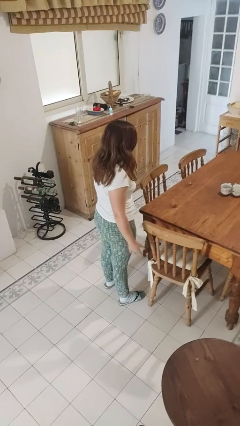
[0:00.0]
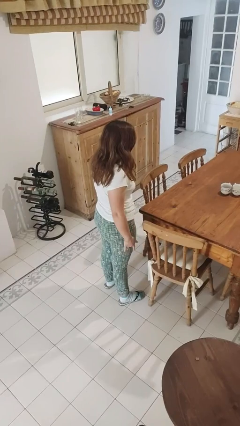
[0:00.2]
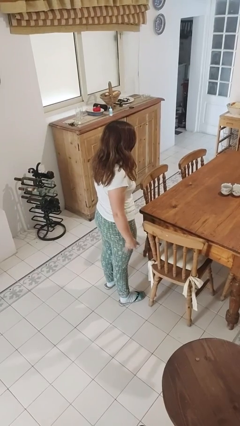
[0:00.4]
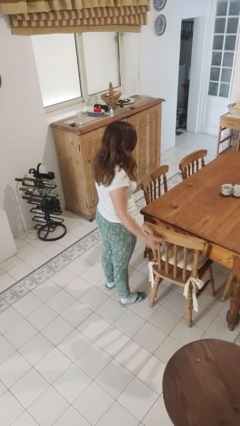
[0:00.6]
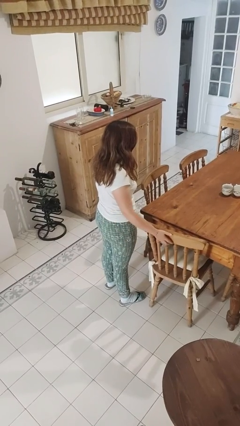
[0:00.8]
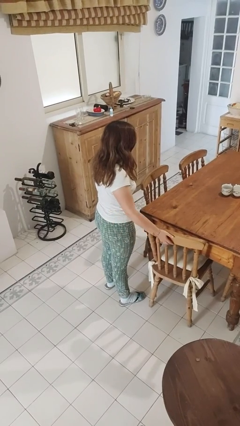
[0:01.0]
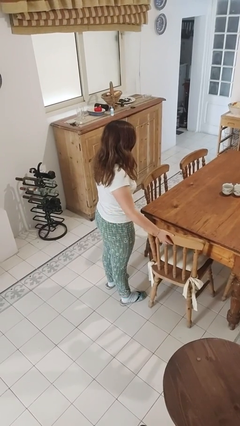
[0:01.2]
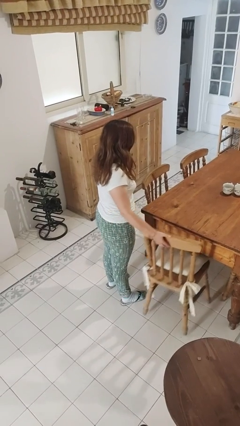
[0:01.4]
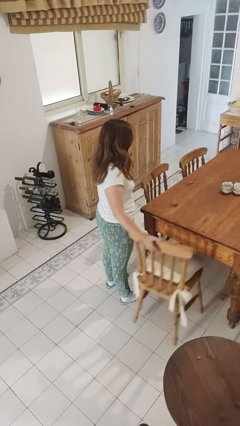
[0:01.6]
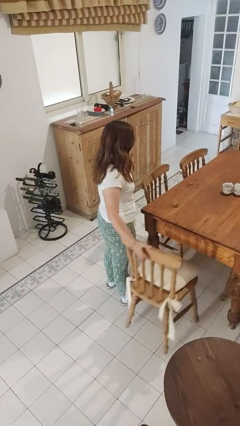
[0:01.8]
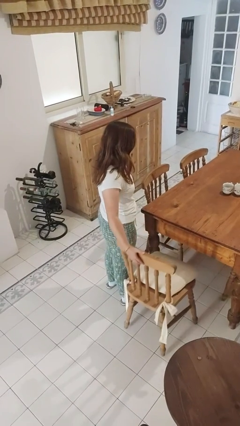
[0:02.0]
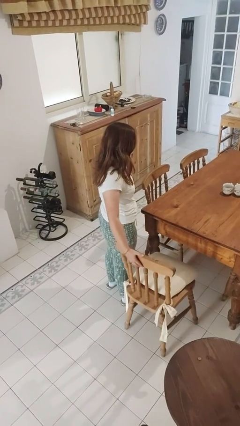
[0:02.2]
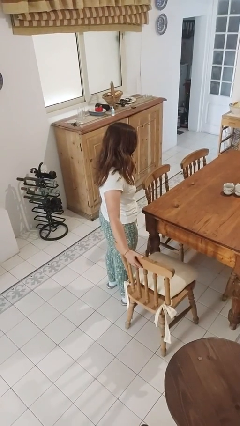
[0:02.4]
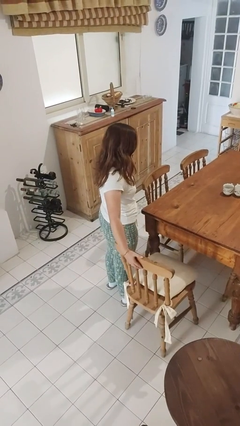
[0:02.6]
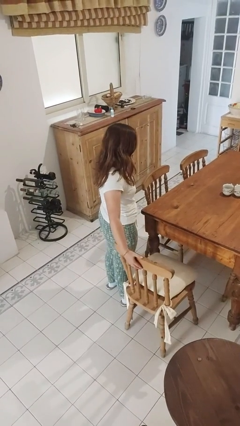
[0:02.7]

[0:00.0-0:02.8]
person pulls out chair

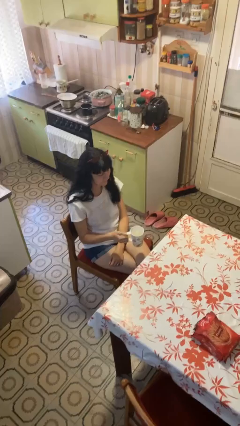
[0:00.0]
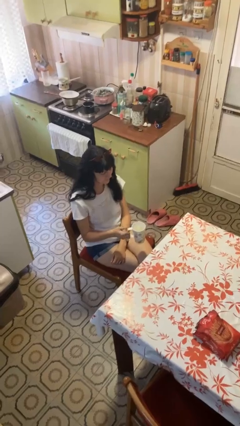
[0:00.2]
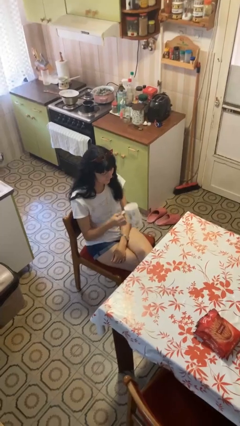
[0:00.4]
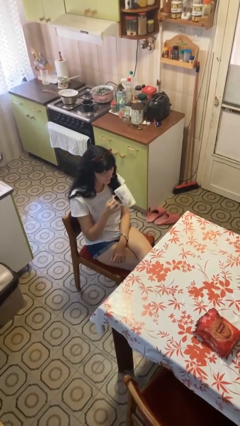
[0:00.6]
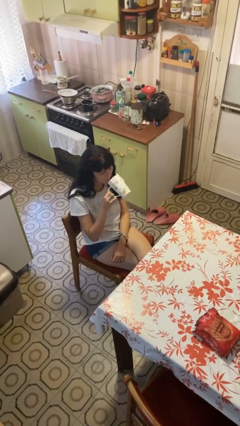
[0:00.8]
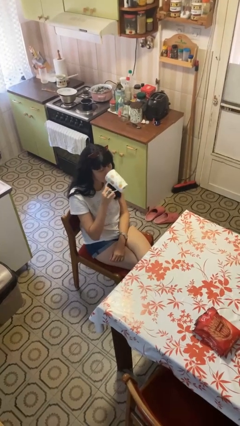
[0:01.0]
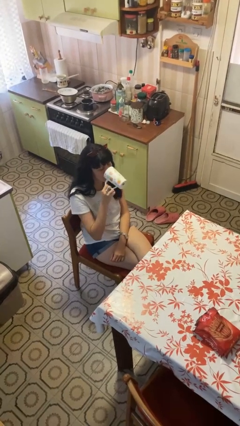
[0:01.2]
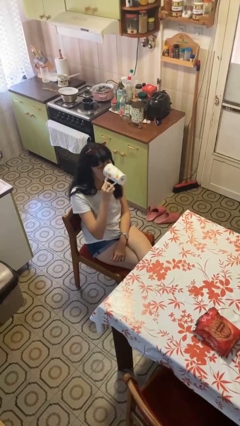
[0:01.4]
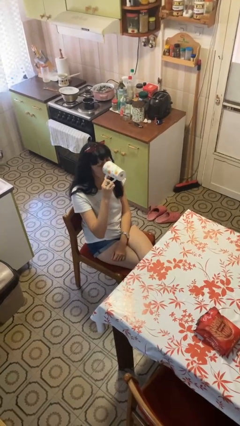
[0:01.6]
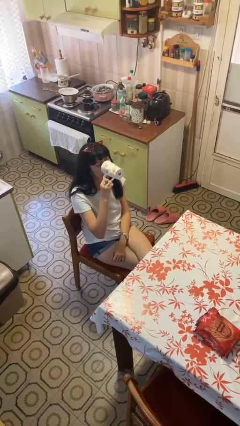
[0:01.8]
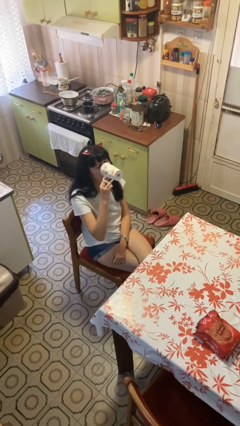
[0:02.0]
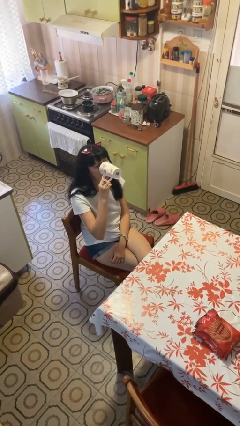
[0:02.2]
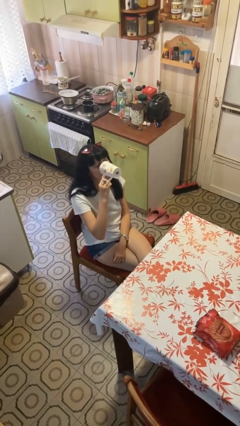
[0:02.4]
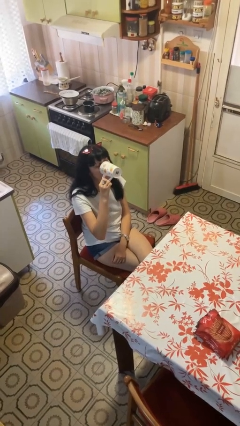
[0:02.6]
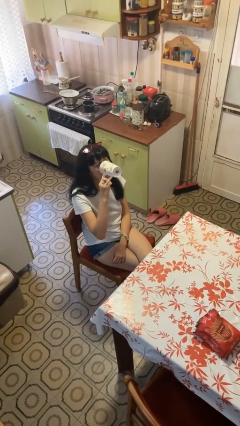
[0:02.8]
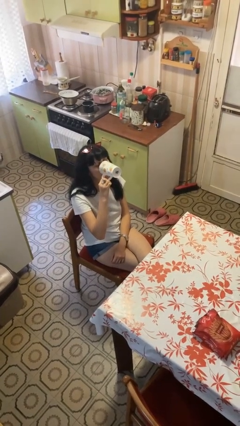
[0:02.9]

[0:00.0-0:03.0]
person drinks from mug

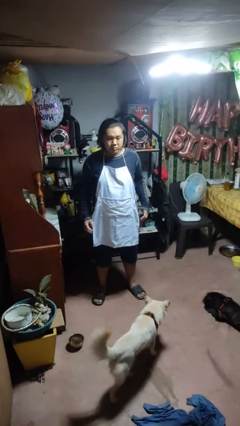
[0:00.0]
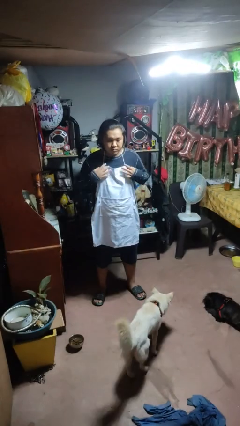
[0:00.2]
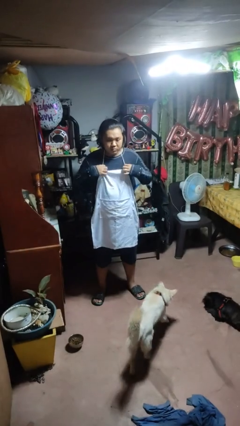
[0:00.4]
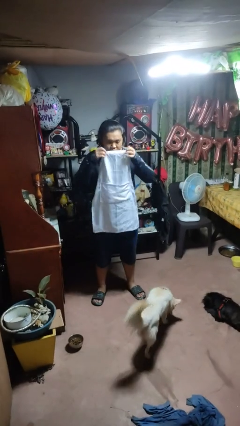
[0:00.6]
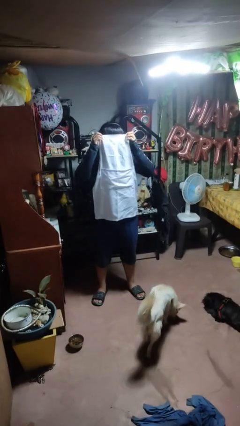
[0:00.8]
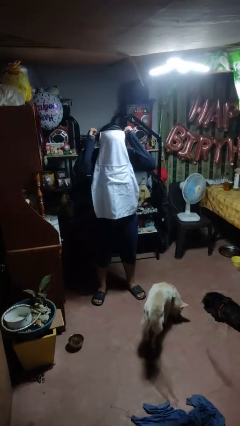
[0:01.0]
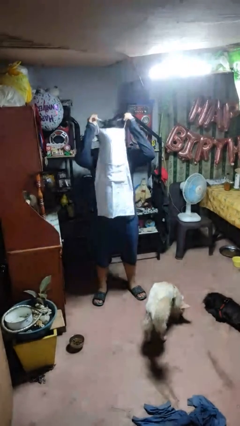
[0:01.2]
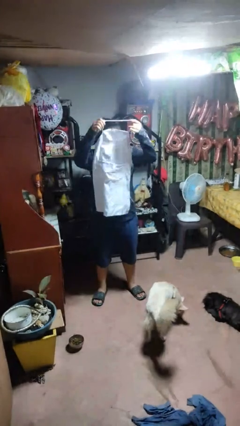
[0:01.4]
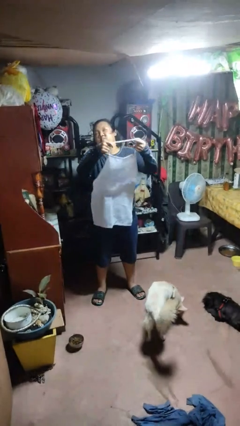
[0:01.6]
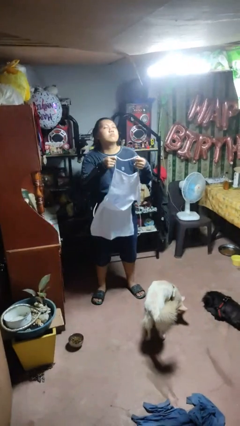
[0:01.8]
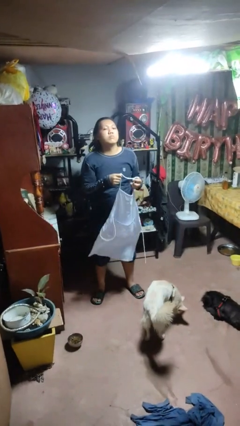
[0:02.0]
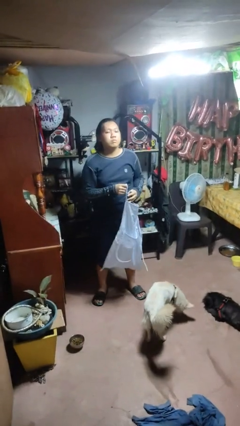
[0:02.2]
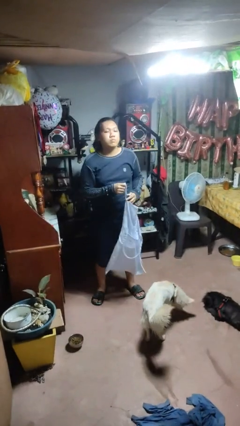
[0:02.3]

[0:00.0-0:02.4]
person takes off apron

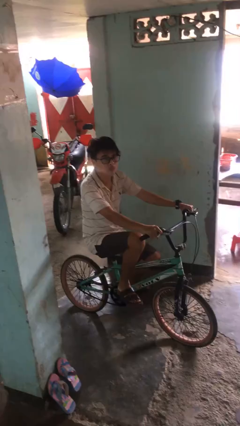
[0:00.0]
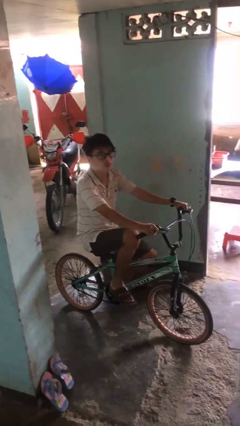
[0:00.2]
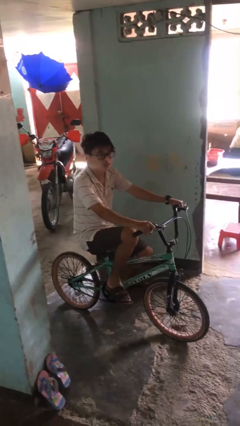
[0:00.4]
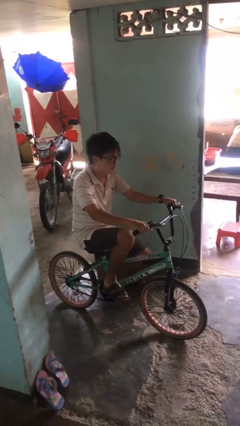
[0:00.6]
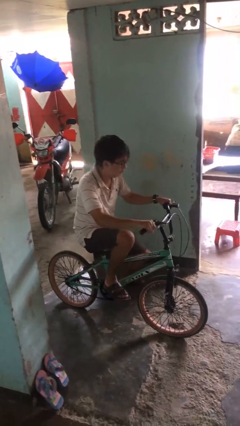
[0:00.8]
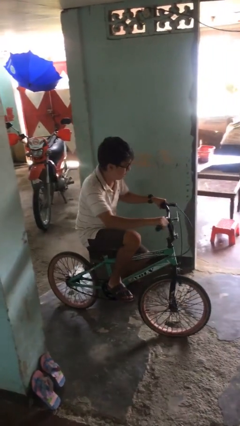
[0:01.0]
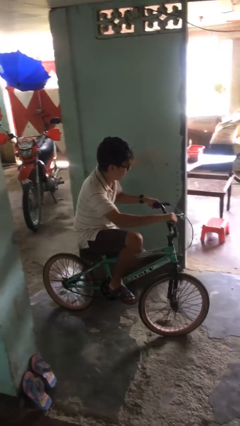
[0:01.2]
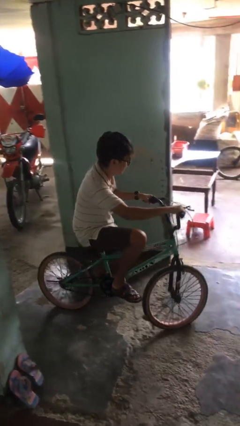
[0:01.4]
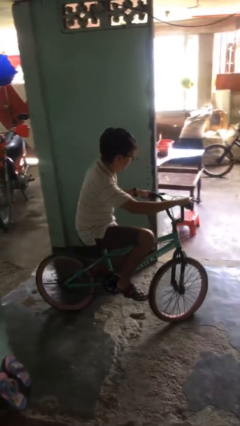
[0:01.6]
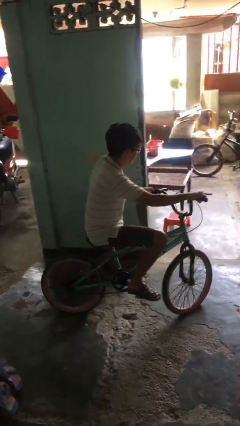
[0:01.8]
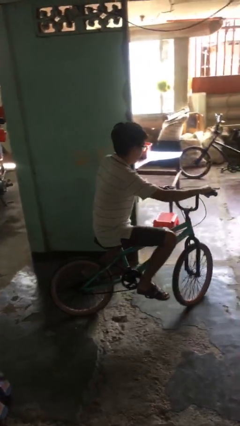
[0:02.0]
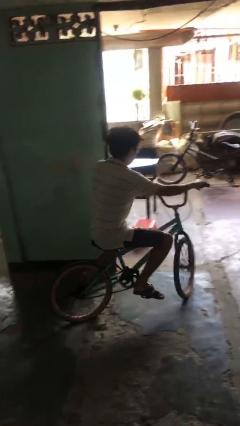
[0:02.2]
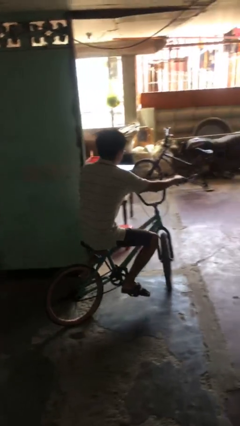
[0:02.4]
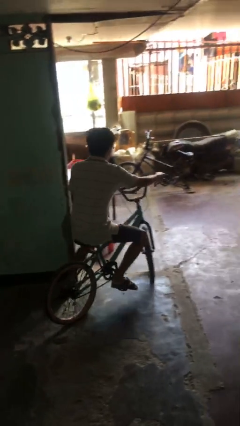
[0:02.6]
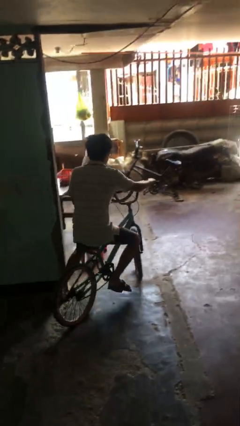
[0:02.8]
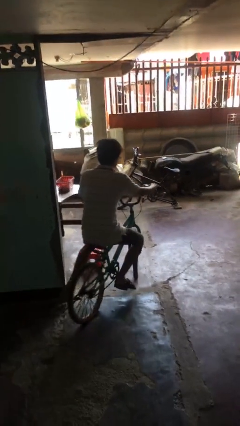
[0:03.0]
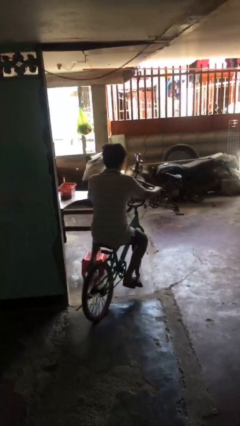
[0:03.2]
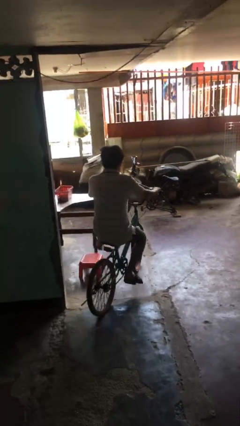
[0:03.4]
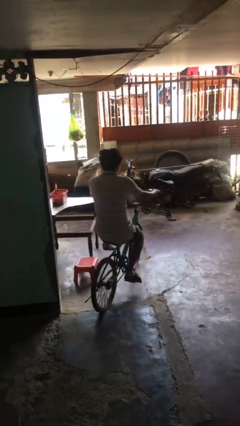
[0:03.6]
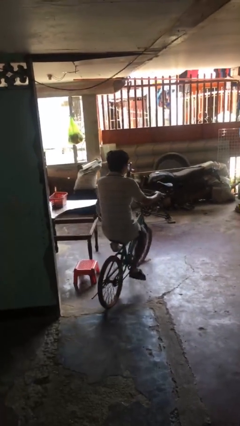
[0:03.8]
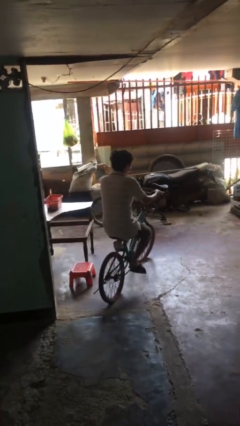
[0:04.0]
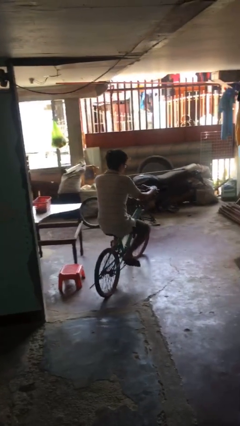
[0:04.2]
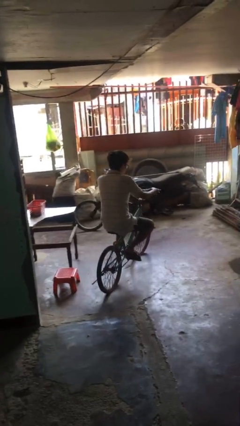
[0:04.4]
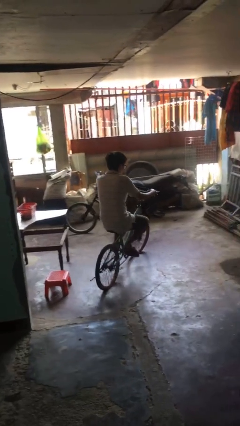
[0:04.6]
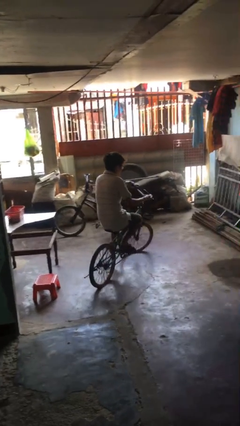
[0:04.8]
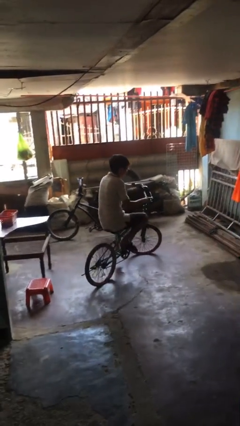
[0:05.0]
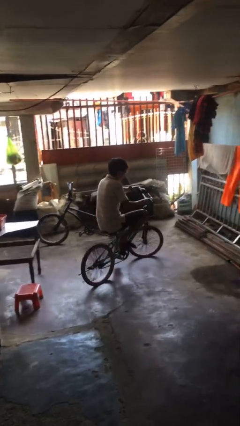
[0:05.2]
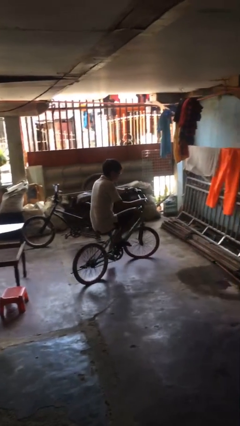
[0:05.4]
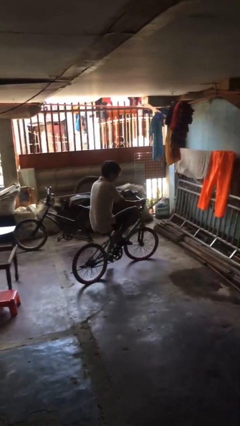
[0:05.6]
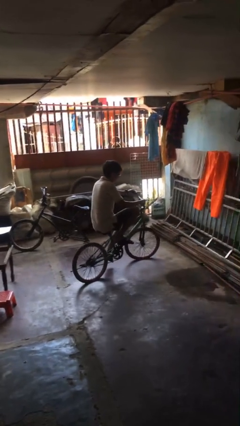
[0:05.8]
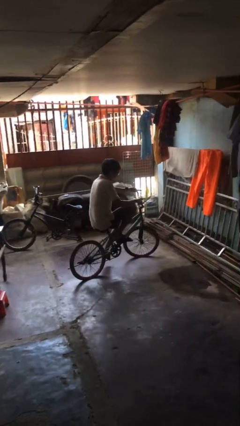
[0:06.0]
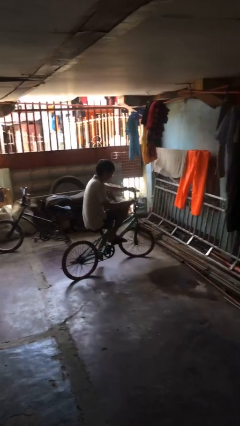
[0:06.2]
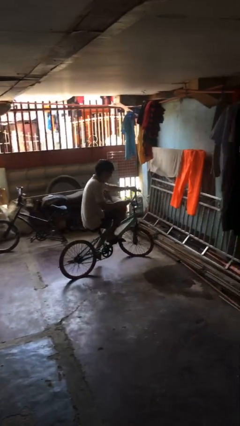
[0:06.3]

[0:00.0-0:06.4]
person rides bicycle

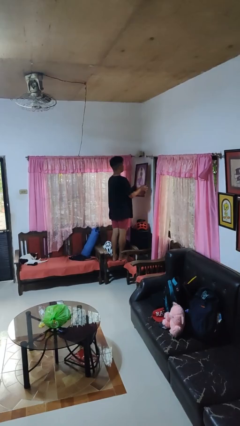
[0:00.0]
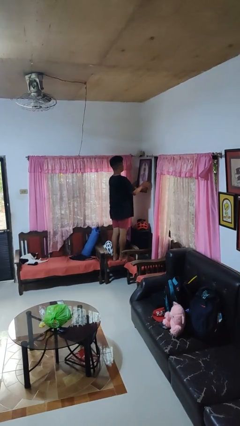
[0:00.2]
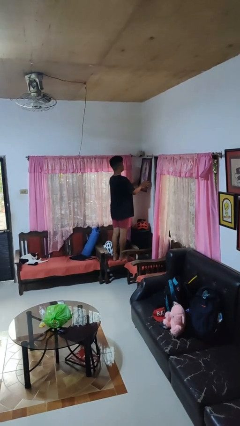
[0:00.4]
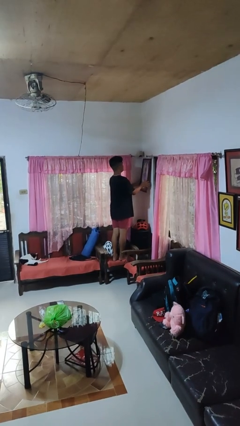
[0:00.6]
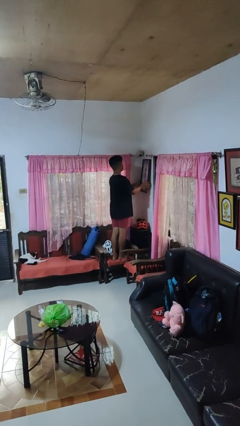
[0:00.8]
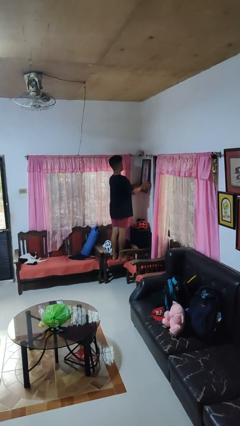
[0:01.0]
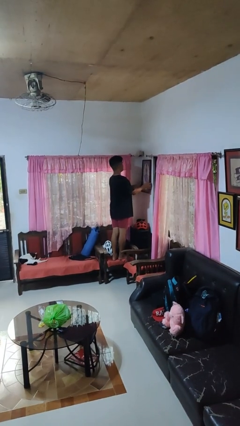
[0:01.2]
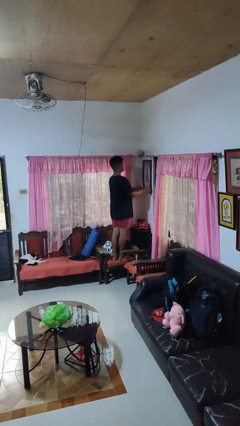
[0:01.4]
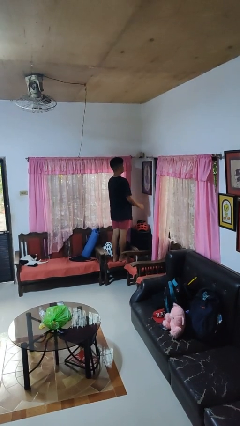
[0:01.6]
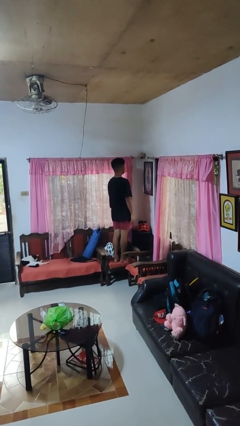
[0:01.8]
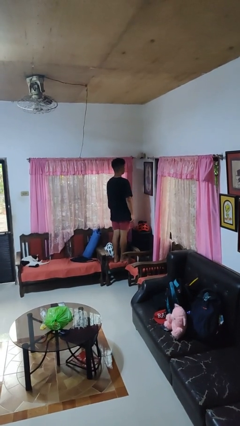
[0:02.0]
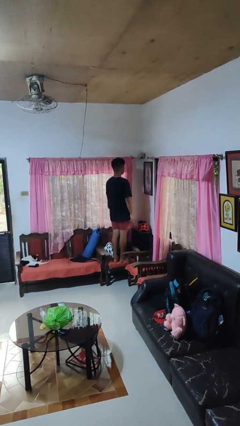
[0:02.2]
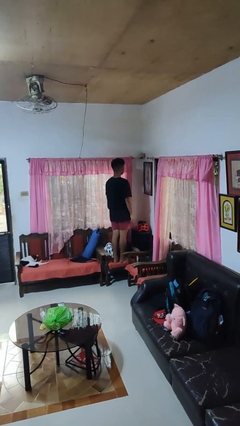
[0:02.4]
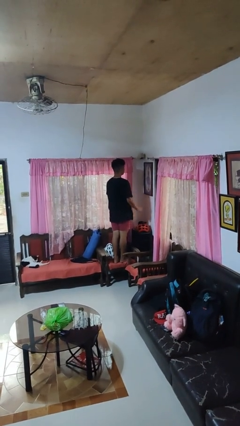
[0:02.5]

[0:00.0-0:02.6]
person puts up picture frame

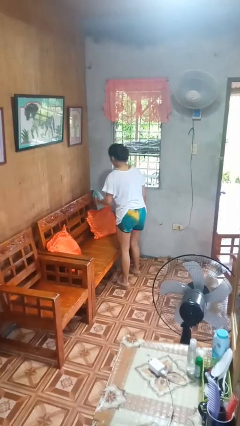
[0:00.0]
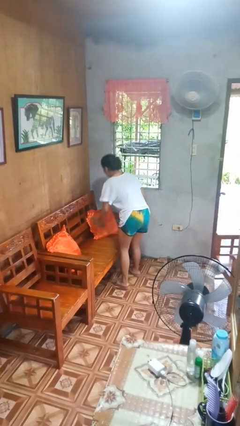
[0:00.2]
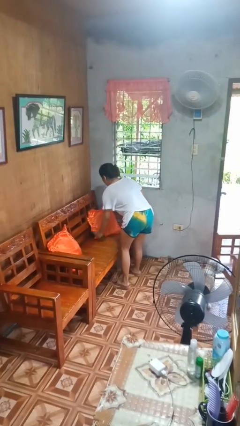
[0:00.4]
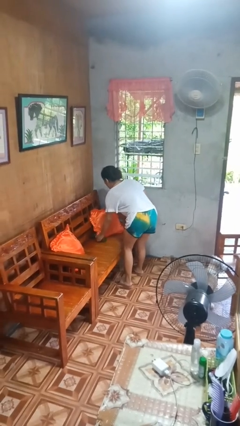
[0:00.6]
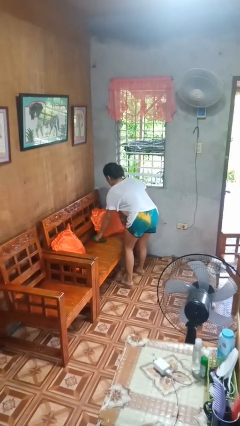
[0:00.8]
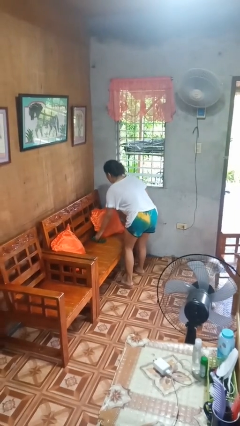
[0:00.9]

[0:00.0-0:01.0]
person puts down object on couch
